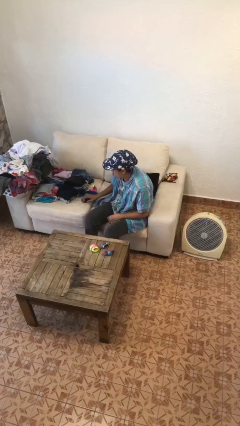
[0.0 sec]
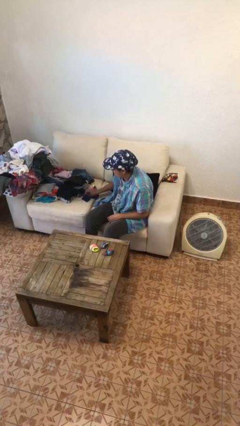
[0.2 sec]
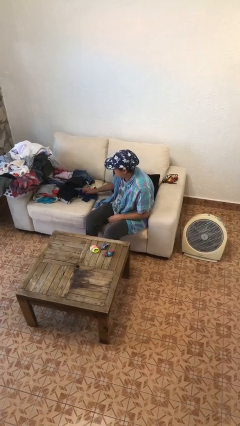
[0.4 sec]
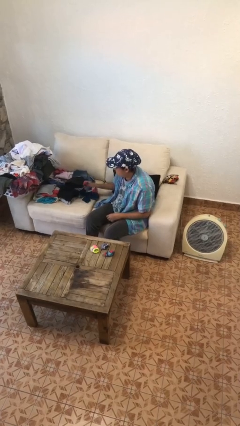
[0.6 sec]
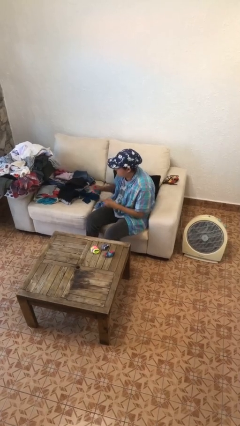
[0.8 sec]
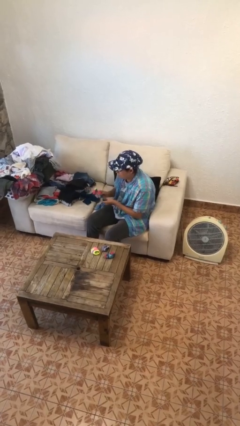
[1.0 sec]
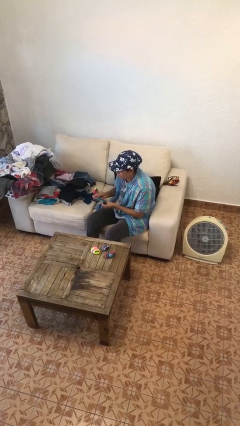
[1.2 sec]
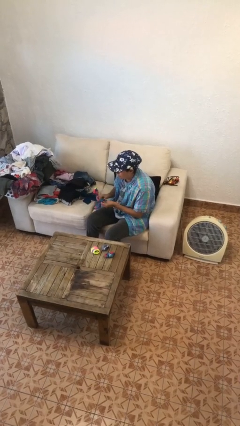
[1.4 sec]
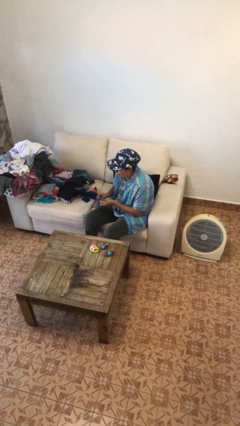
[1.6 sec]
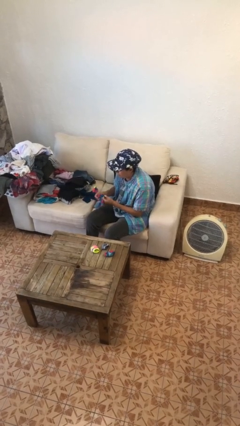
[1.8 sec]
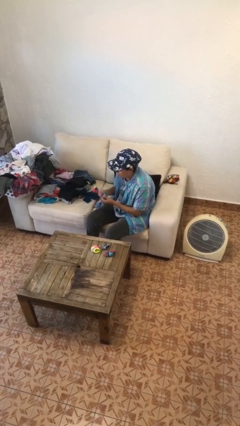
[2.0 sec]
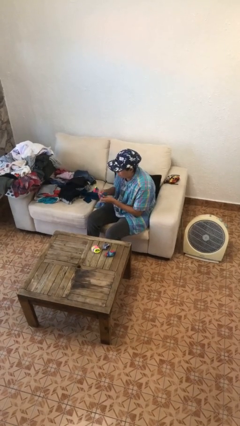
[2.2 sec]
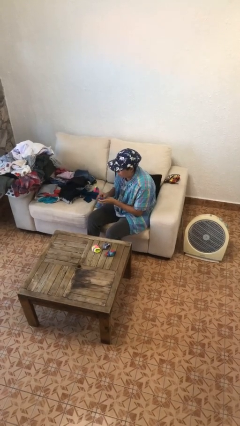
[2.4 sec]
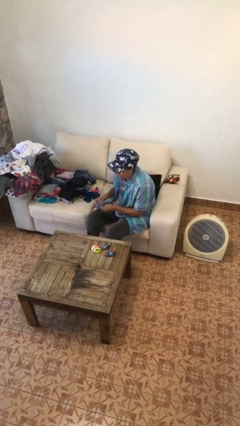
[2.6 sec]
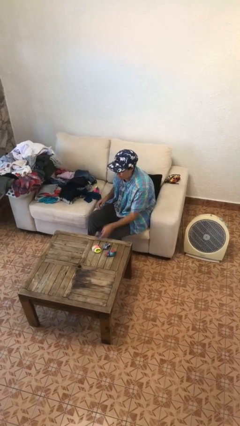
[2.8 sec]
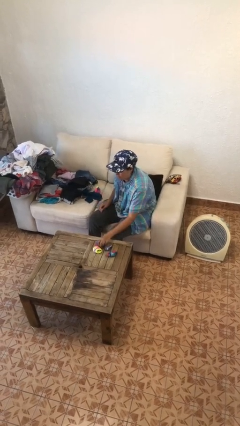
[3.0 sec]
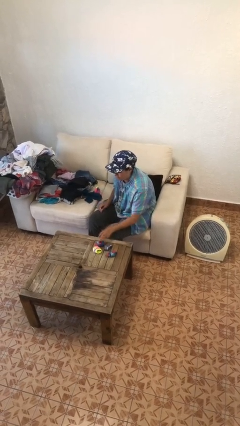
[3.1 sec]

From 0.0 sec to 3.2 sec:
person folds socks

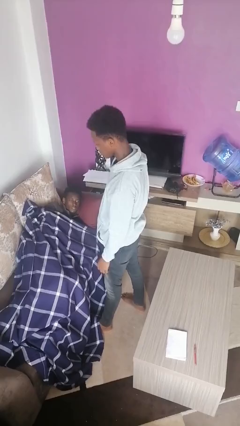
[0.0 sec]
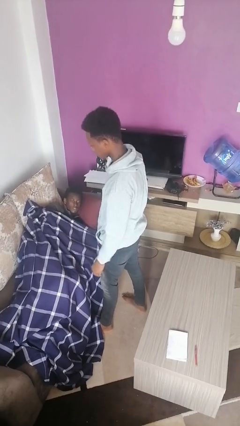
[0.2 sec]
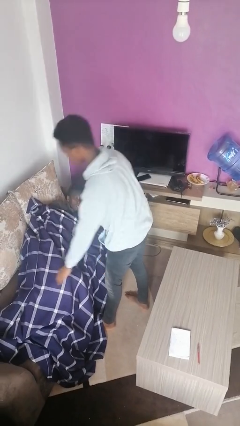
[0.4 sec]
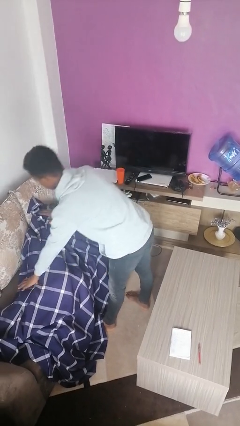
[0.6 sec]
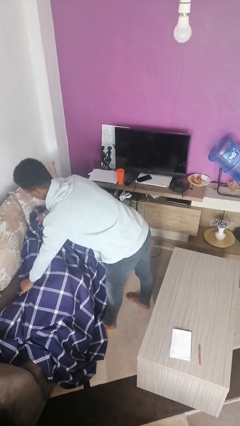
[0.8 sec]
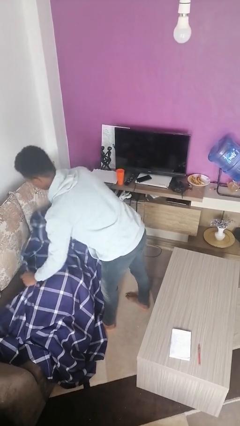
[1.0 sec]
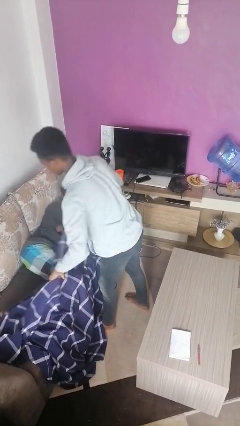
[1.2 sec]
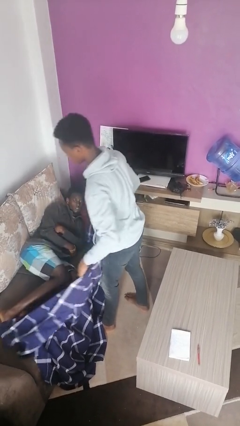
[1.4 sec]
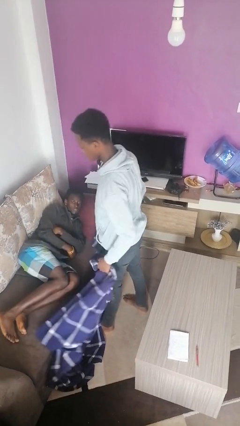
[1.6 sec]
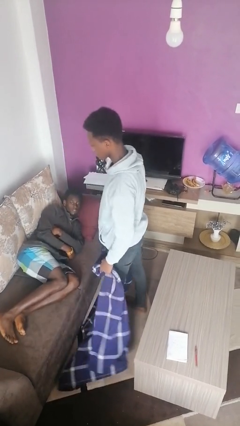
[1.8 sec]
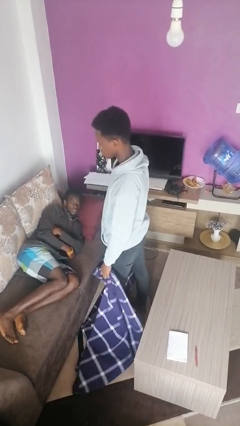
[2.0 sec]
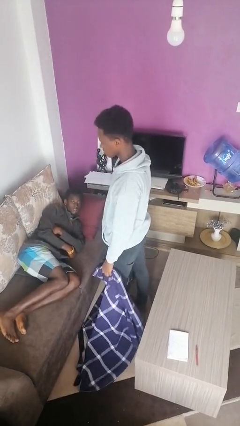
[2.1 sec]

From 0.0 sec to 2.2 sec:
person uncovers friend with blanket

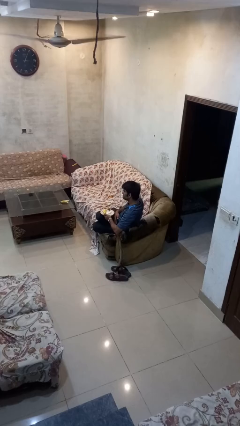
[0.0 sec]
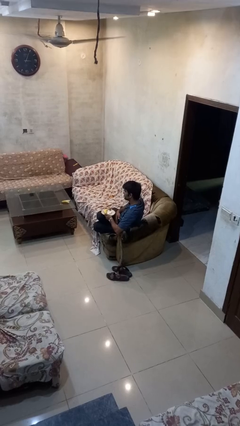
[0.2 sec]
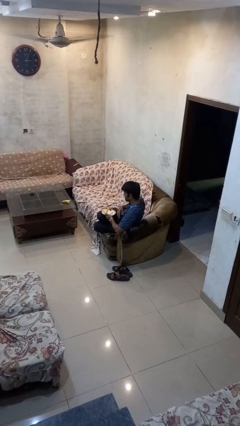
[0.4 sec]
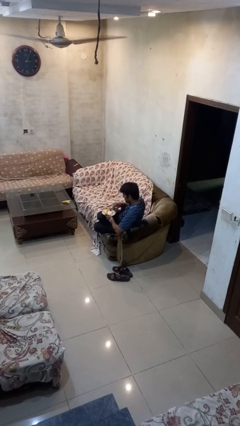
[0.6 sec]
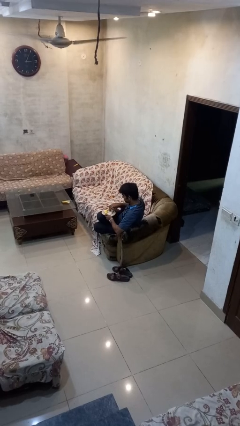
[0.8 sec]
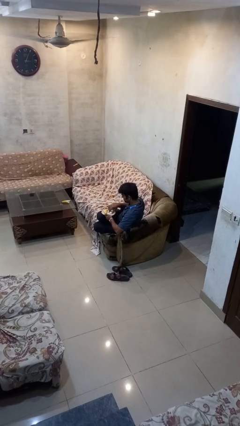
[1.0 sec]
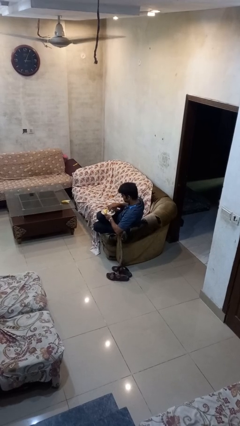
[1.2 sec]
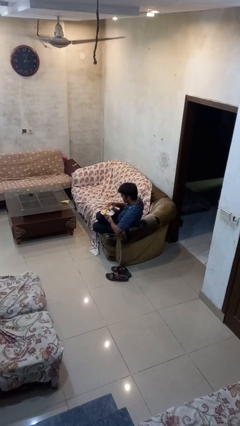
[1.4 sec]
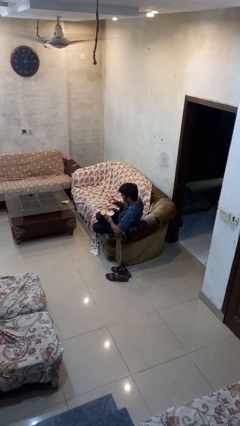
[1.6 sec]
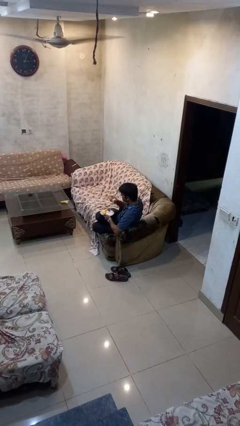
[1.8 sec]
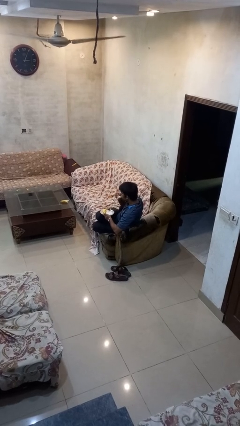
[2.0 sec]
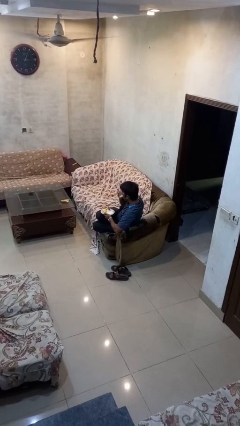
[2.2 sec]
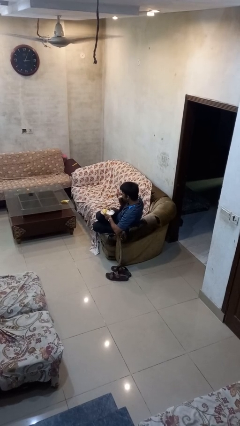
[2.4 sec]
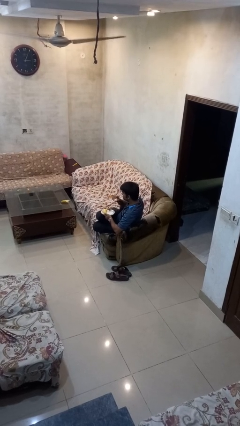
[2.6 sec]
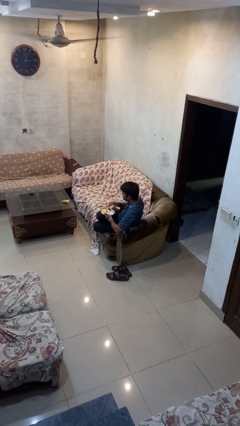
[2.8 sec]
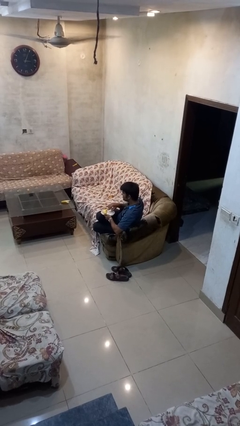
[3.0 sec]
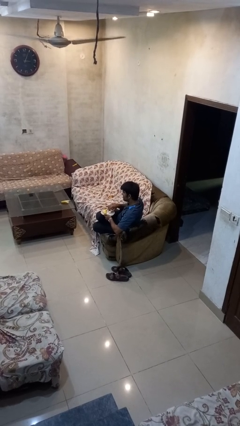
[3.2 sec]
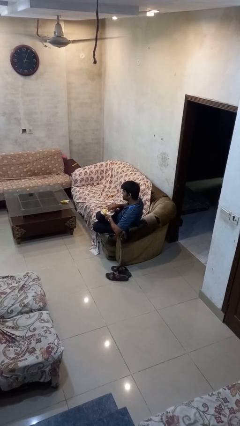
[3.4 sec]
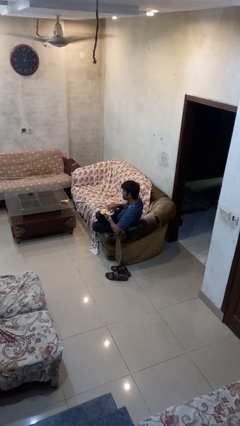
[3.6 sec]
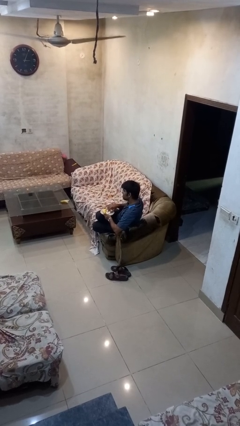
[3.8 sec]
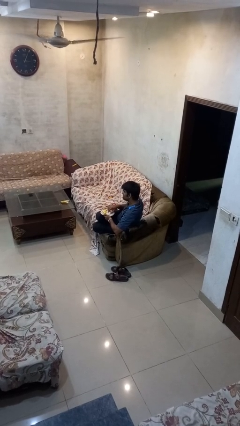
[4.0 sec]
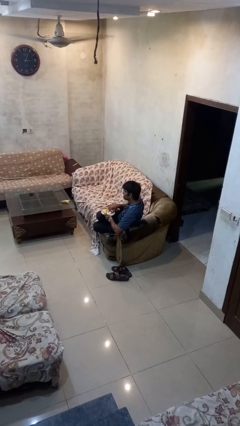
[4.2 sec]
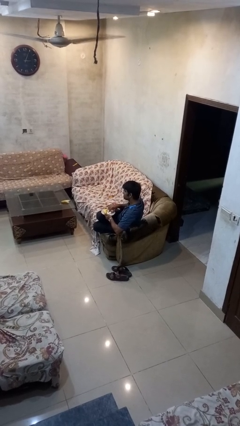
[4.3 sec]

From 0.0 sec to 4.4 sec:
person eats with hands

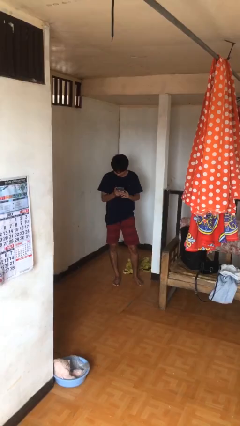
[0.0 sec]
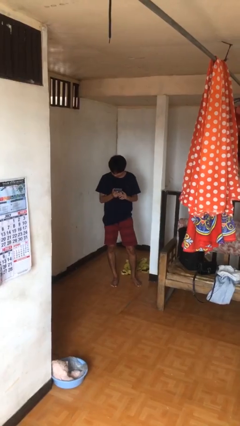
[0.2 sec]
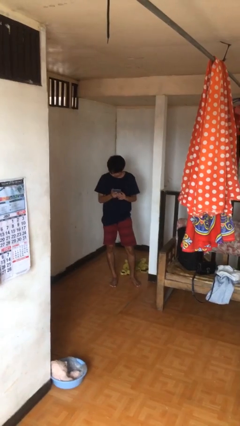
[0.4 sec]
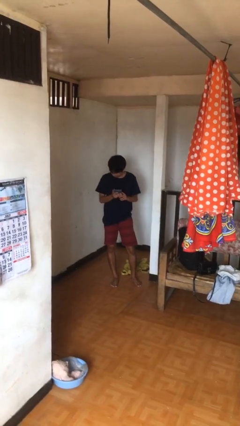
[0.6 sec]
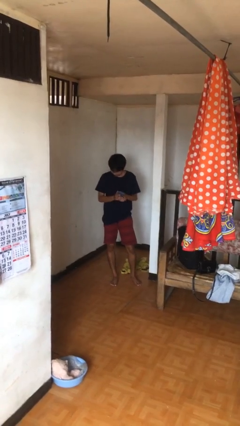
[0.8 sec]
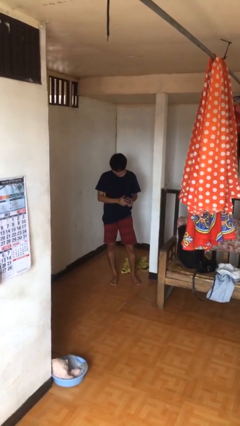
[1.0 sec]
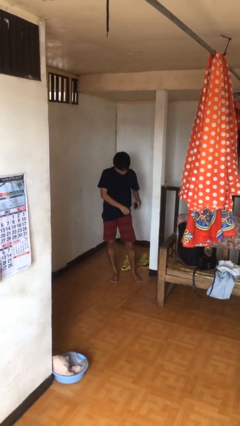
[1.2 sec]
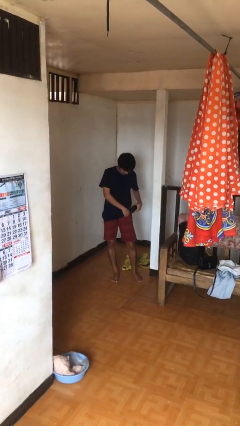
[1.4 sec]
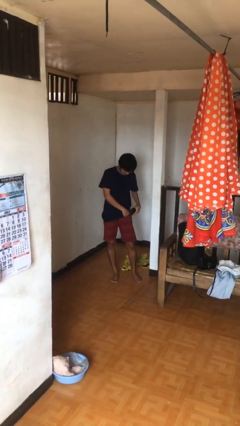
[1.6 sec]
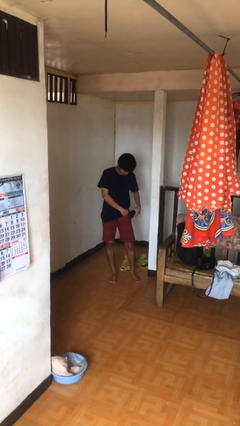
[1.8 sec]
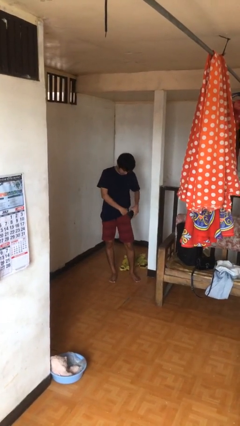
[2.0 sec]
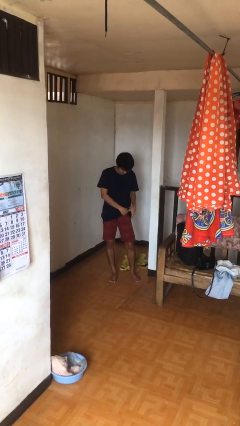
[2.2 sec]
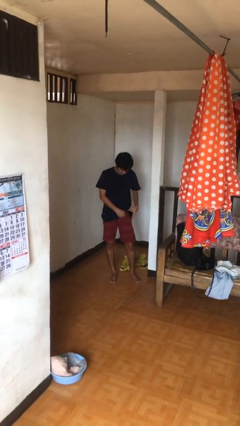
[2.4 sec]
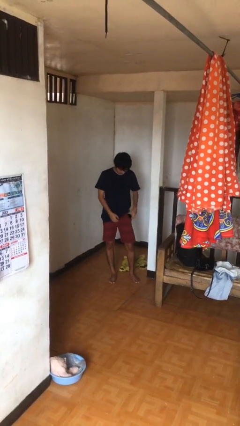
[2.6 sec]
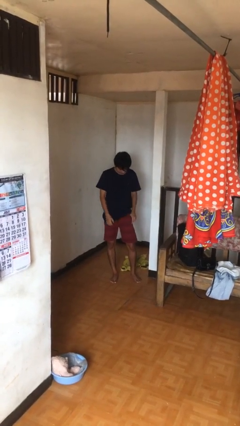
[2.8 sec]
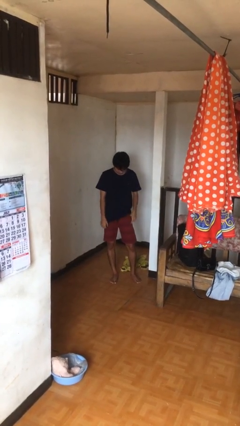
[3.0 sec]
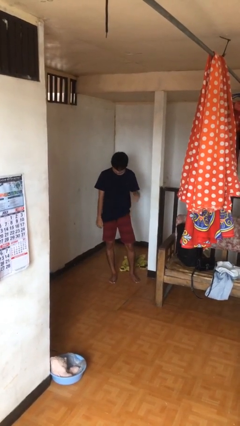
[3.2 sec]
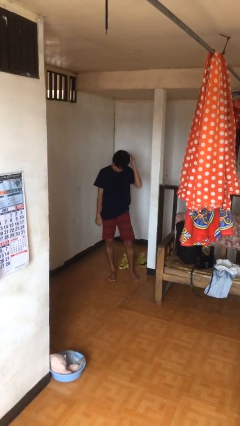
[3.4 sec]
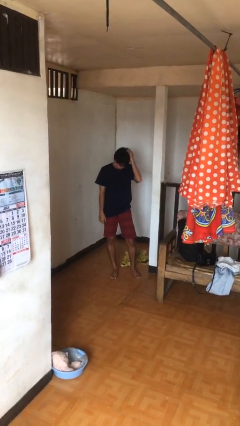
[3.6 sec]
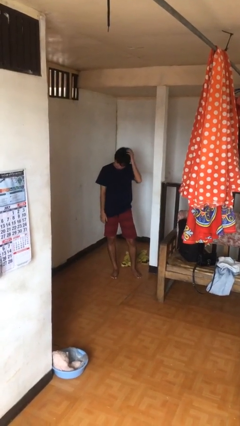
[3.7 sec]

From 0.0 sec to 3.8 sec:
person puts phone into pocket

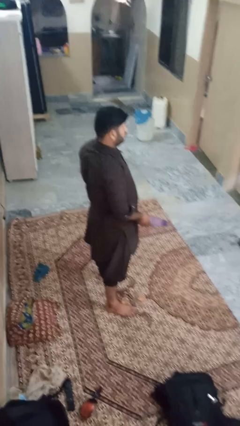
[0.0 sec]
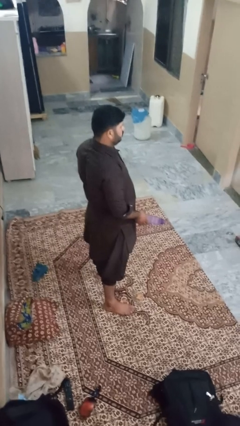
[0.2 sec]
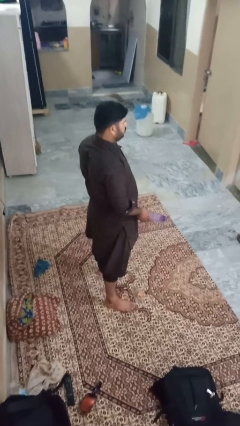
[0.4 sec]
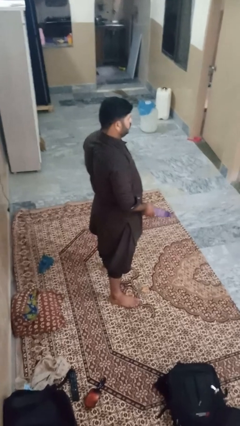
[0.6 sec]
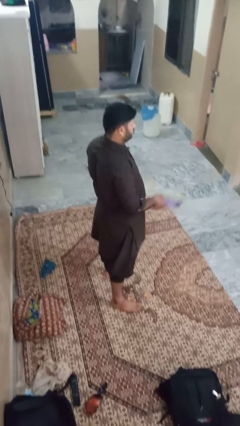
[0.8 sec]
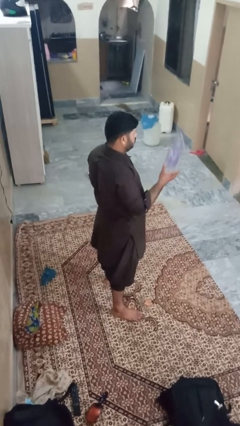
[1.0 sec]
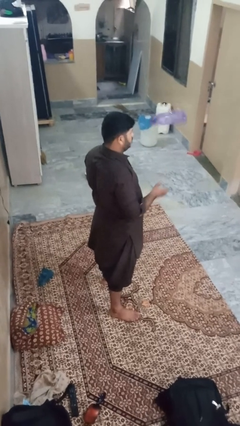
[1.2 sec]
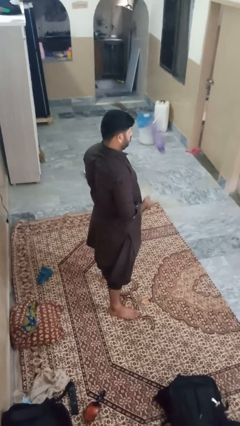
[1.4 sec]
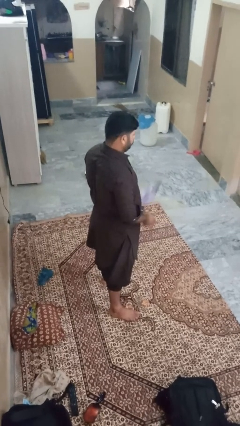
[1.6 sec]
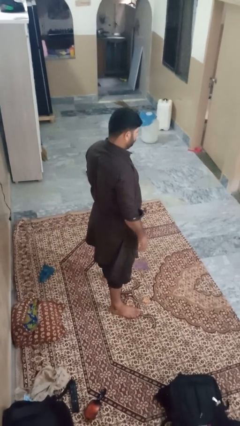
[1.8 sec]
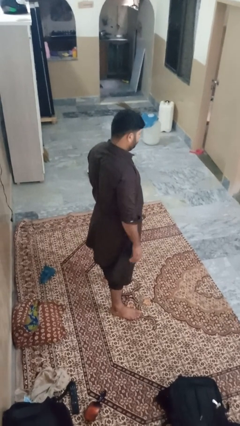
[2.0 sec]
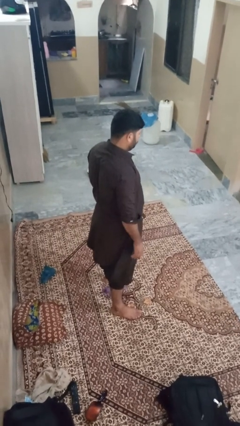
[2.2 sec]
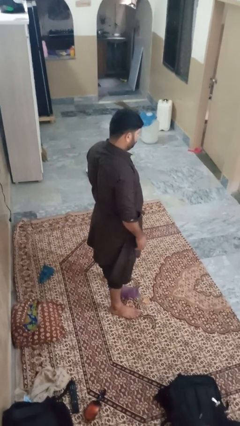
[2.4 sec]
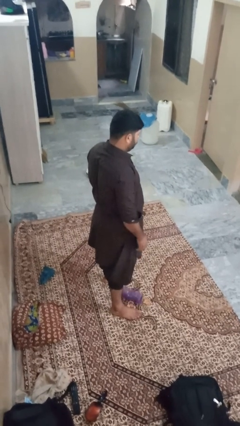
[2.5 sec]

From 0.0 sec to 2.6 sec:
person throws object into air

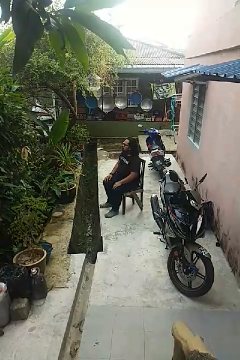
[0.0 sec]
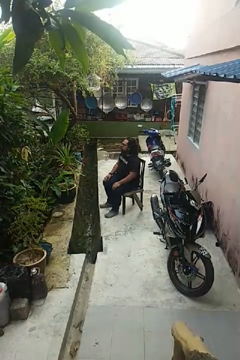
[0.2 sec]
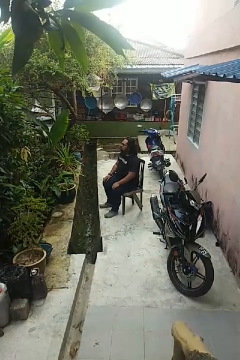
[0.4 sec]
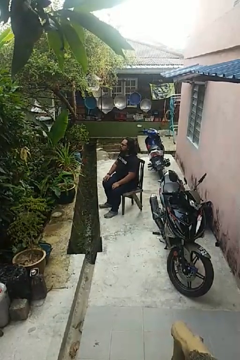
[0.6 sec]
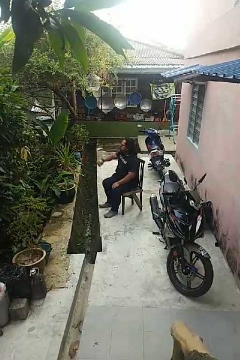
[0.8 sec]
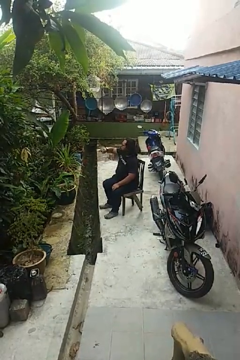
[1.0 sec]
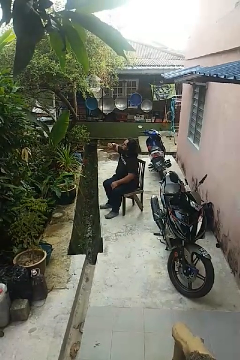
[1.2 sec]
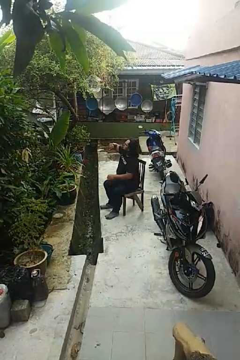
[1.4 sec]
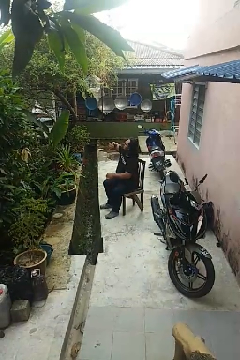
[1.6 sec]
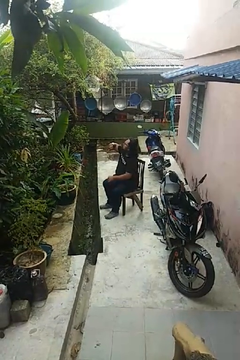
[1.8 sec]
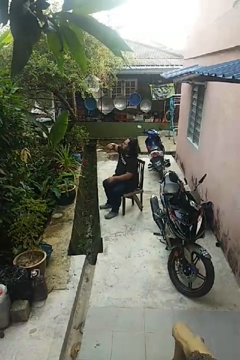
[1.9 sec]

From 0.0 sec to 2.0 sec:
person looks at wristwatch
